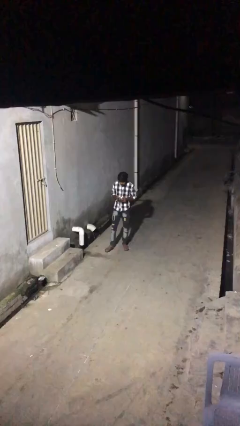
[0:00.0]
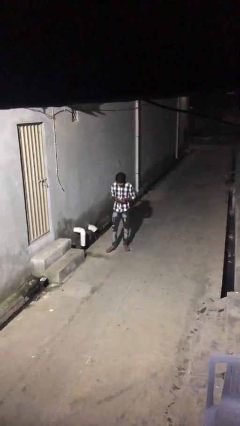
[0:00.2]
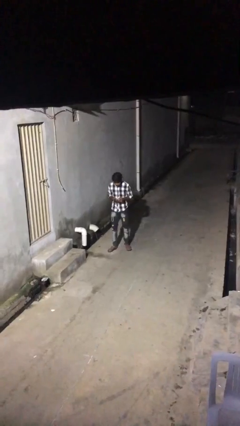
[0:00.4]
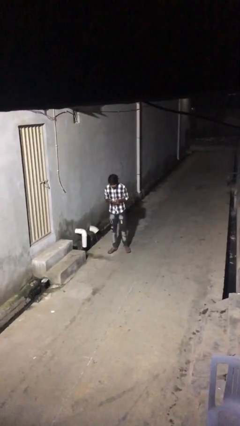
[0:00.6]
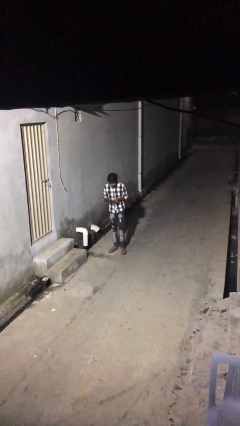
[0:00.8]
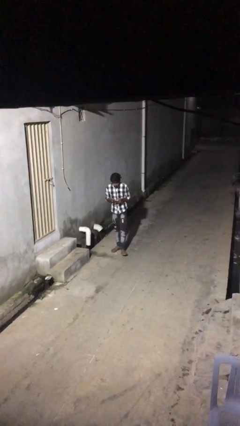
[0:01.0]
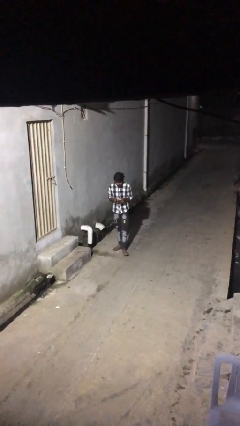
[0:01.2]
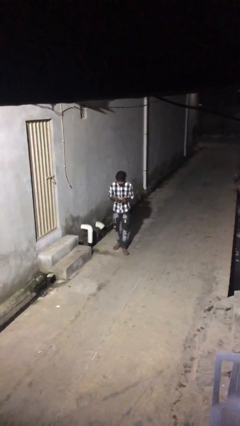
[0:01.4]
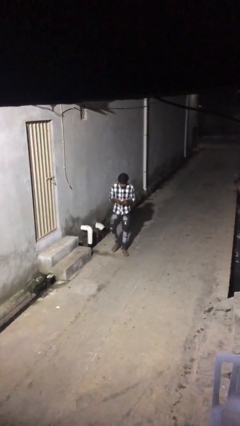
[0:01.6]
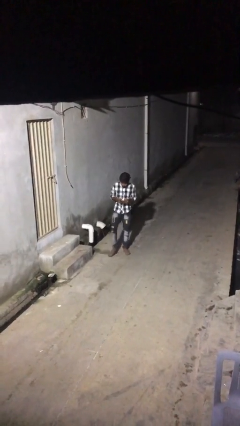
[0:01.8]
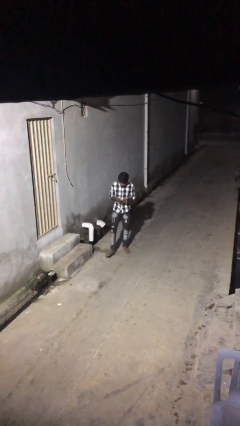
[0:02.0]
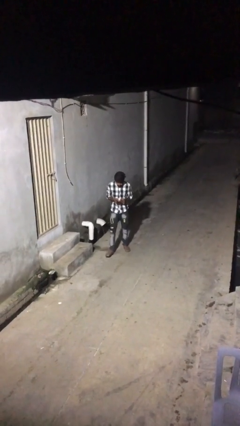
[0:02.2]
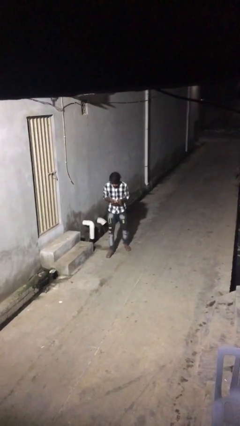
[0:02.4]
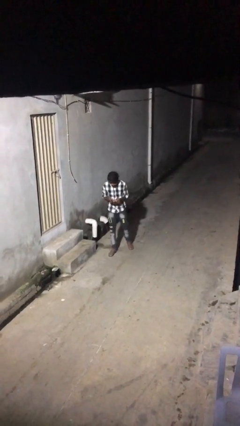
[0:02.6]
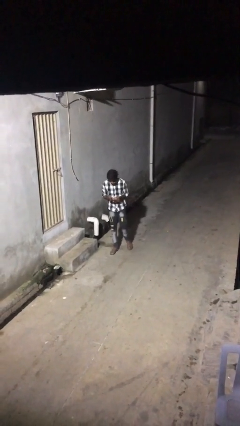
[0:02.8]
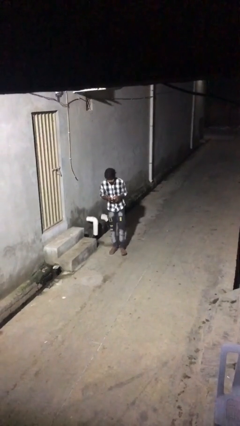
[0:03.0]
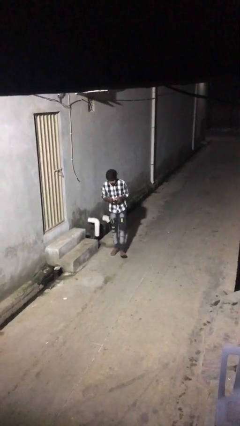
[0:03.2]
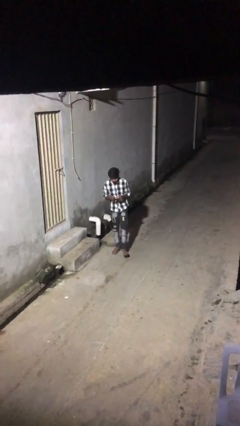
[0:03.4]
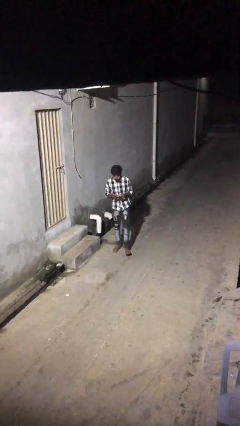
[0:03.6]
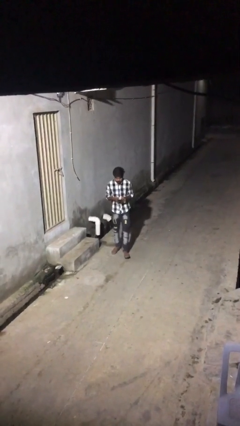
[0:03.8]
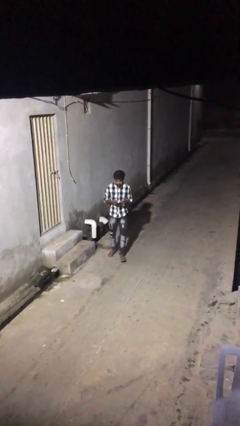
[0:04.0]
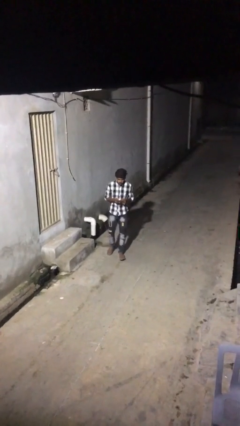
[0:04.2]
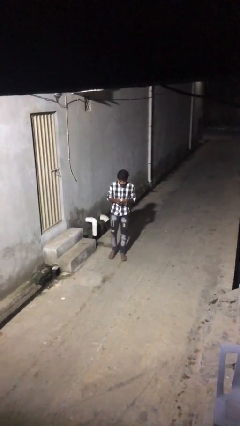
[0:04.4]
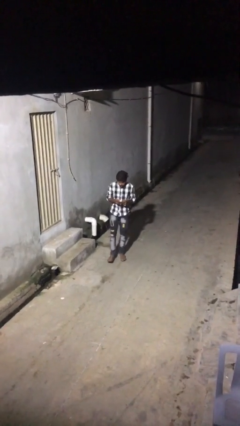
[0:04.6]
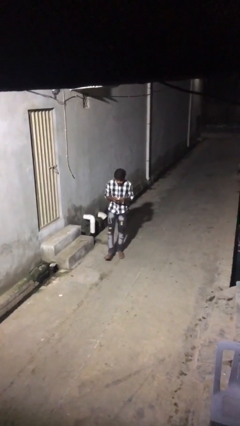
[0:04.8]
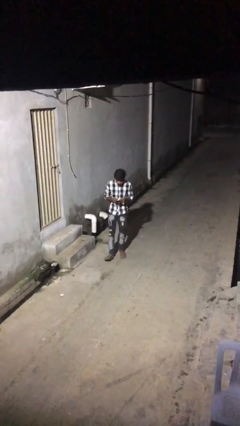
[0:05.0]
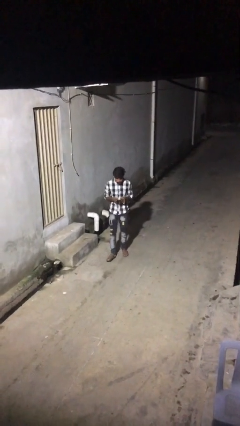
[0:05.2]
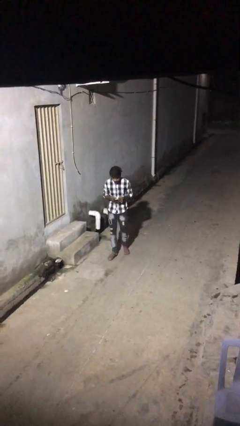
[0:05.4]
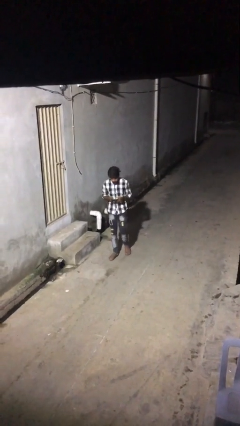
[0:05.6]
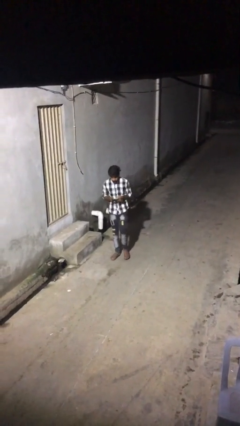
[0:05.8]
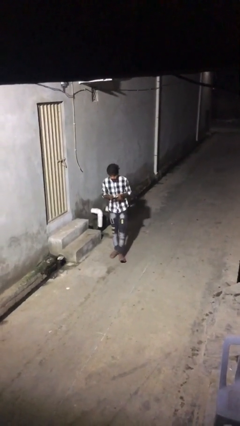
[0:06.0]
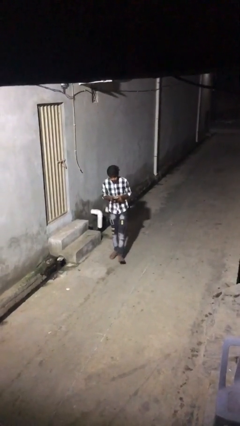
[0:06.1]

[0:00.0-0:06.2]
person texts on phone

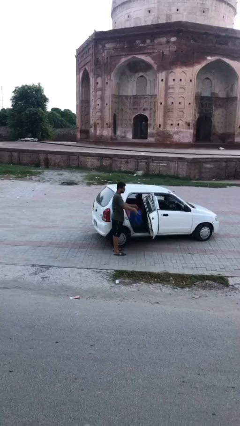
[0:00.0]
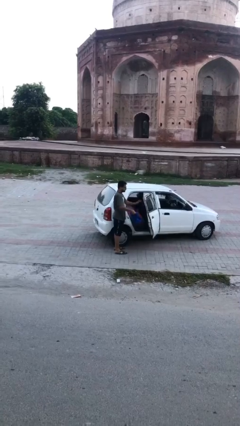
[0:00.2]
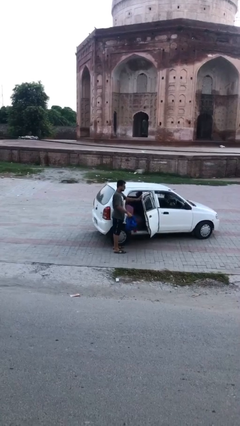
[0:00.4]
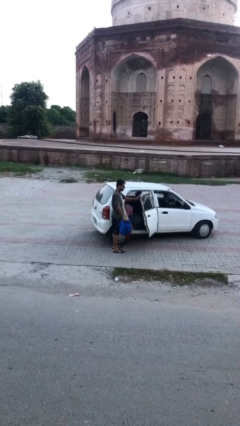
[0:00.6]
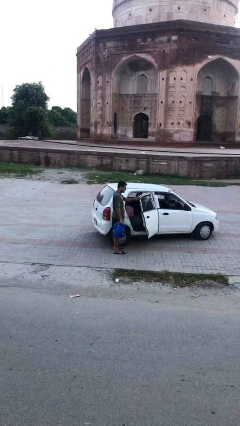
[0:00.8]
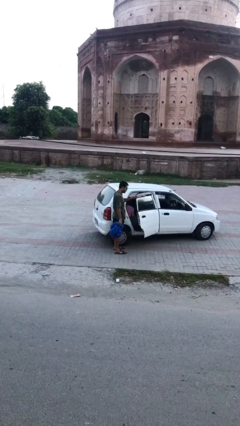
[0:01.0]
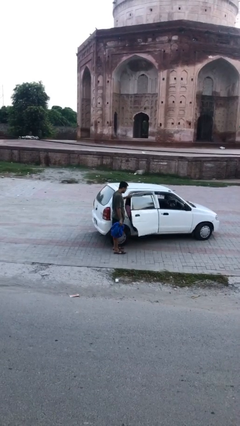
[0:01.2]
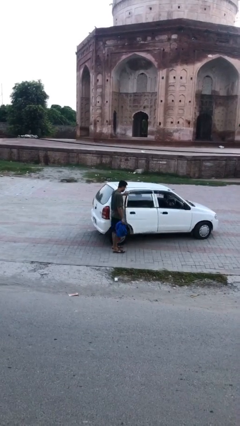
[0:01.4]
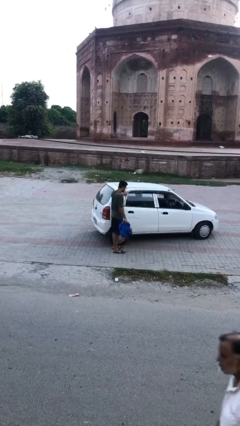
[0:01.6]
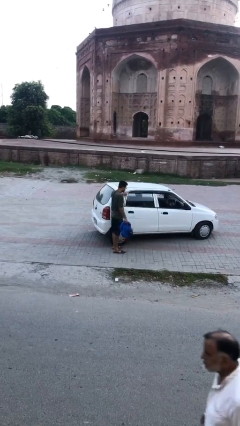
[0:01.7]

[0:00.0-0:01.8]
person closes car door

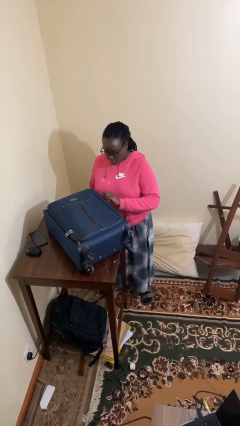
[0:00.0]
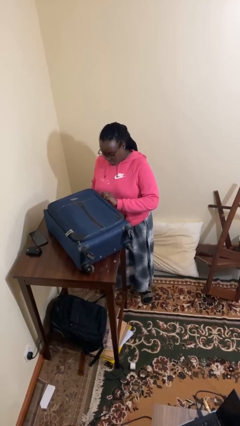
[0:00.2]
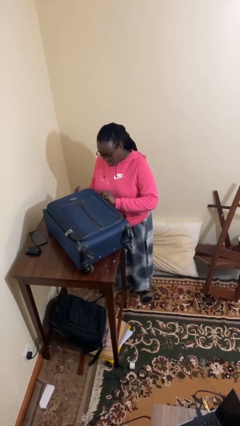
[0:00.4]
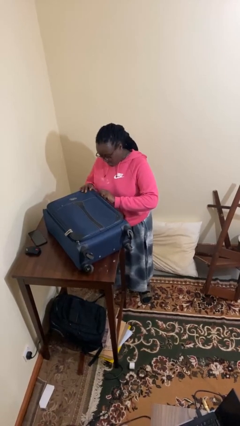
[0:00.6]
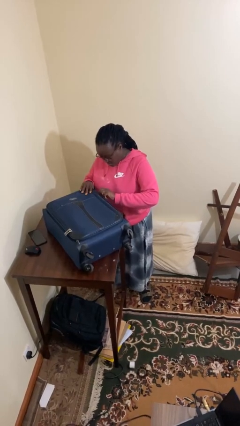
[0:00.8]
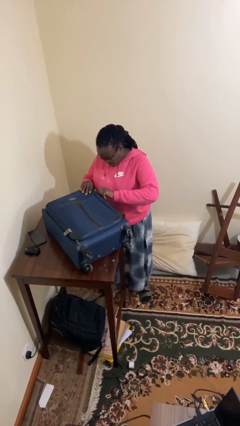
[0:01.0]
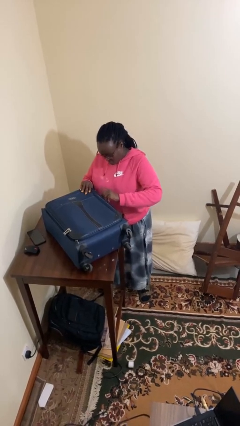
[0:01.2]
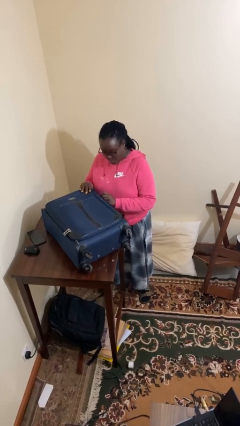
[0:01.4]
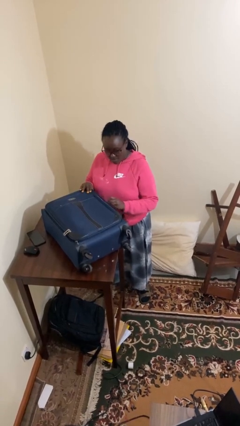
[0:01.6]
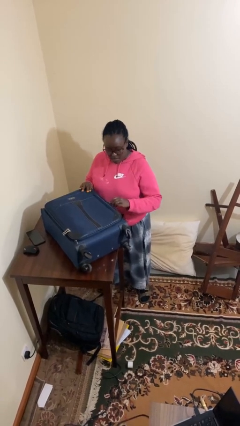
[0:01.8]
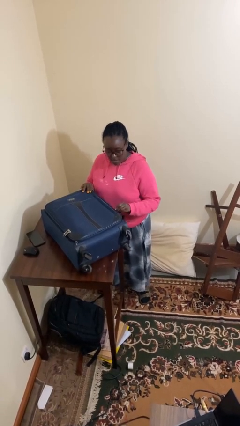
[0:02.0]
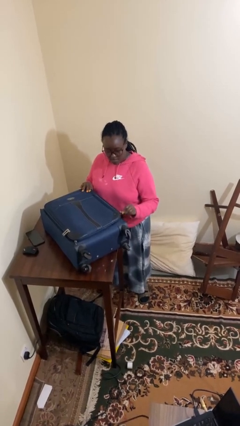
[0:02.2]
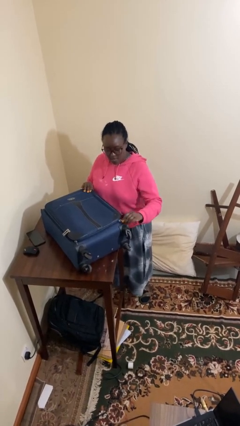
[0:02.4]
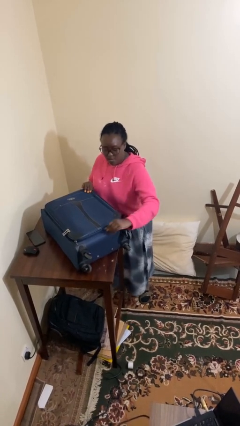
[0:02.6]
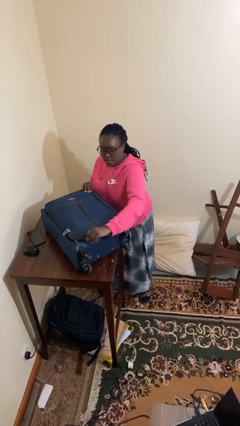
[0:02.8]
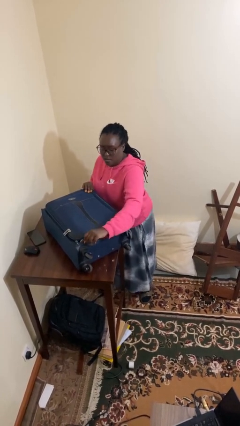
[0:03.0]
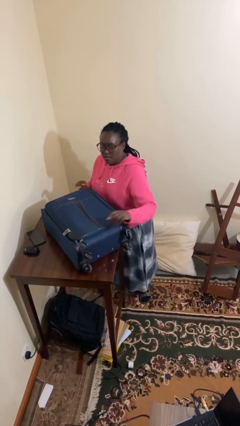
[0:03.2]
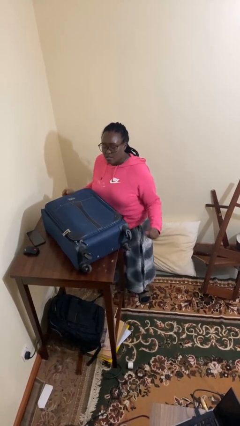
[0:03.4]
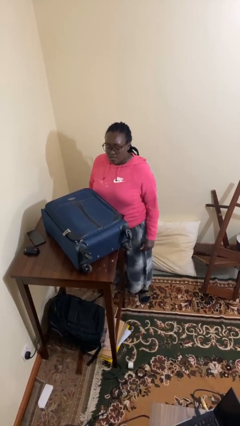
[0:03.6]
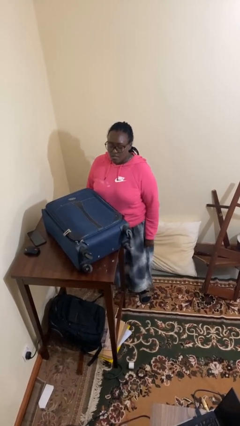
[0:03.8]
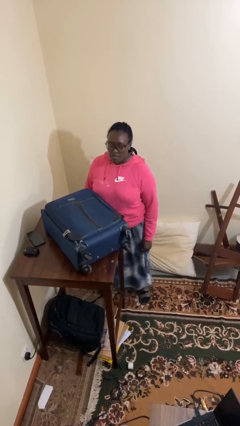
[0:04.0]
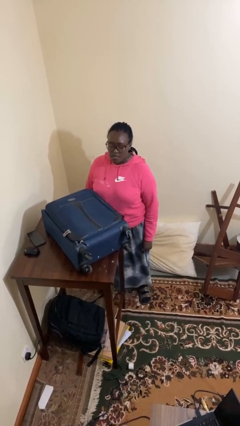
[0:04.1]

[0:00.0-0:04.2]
person closes suitcase

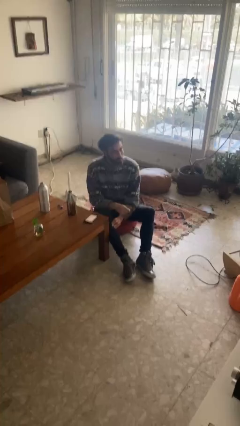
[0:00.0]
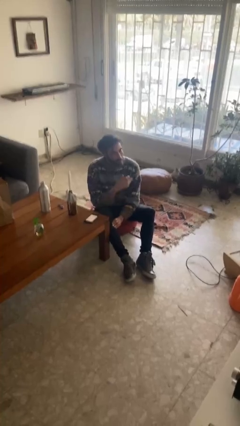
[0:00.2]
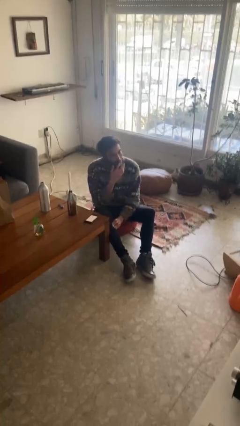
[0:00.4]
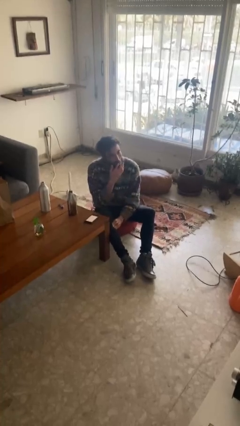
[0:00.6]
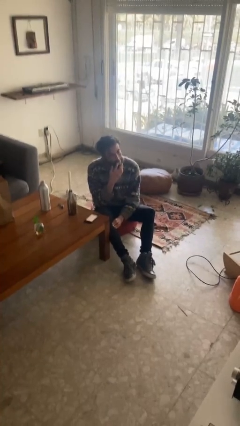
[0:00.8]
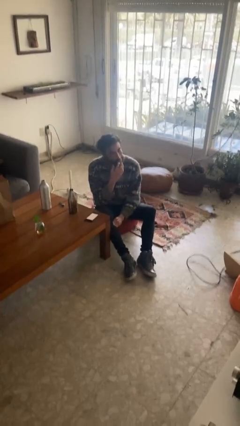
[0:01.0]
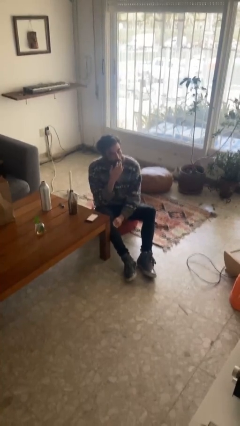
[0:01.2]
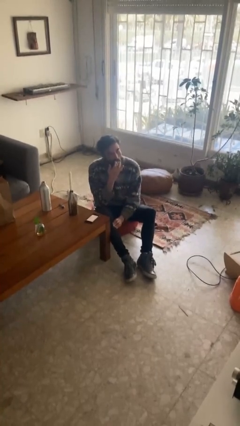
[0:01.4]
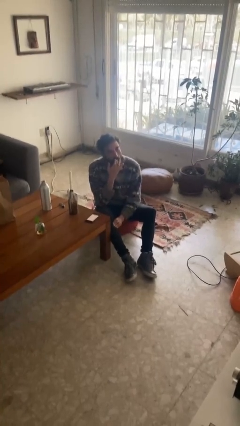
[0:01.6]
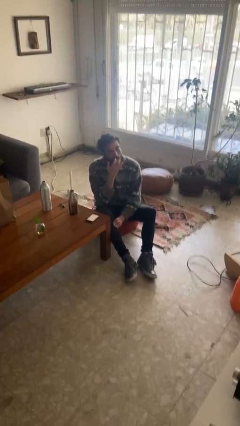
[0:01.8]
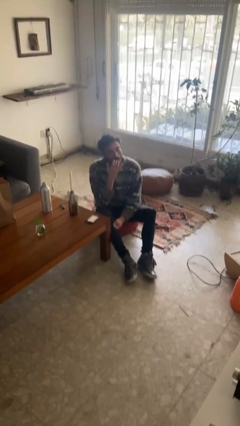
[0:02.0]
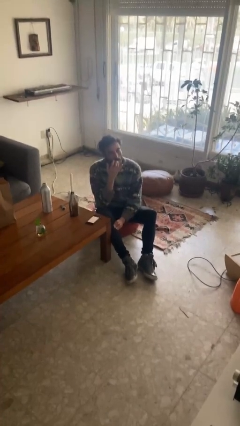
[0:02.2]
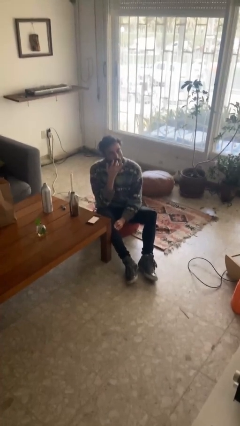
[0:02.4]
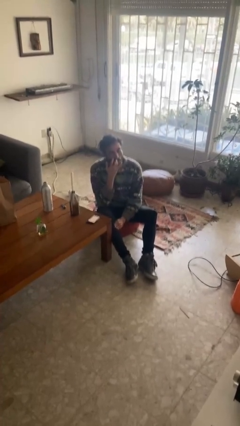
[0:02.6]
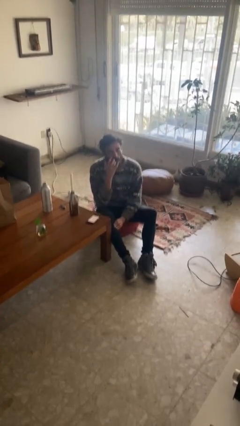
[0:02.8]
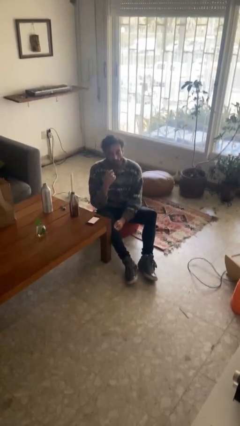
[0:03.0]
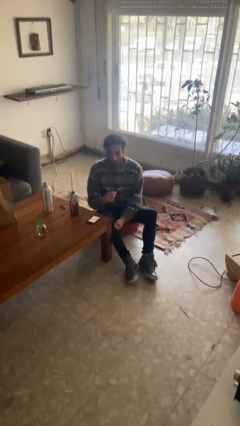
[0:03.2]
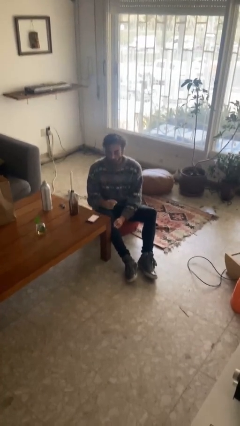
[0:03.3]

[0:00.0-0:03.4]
person licks fingers

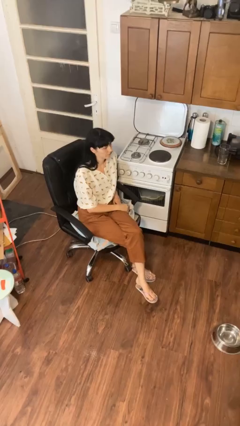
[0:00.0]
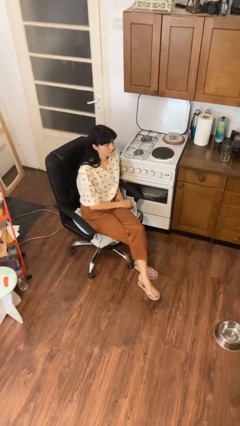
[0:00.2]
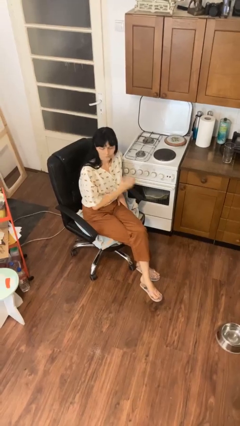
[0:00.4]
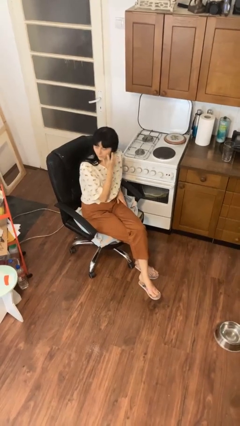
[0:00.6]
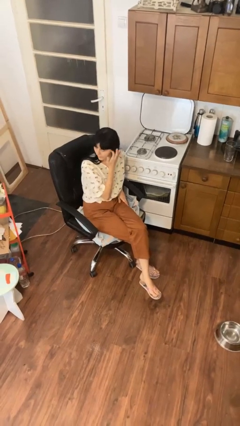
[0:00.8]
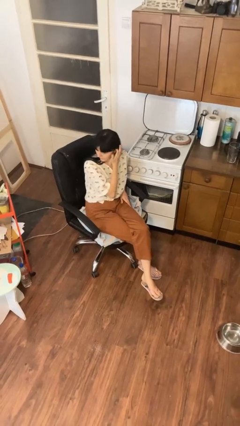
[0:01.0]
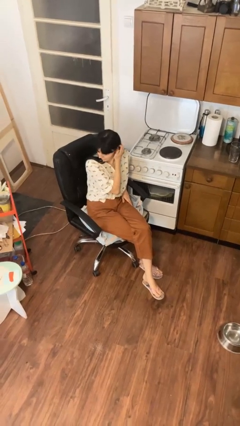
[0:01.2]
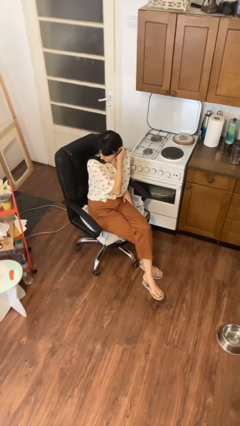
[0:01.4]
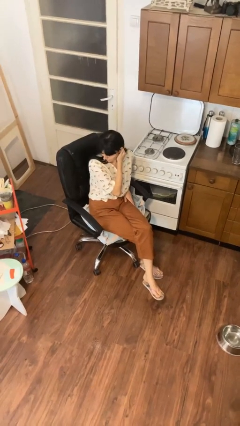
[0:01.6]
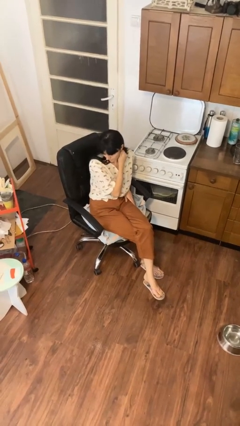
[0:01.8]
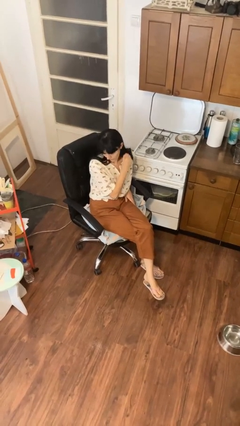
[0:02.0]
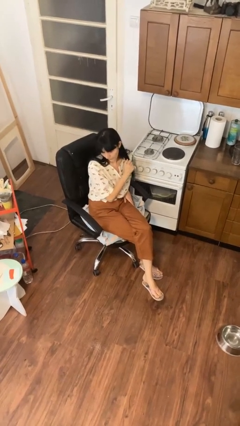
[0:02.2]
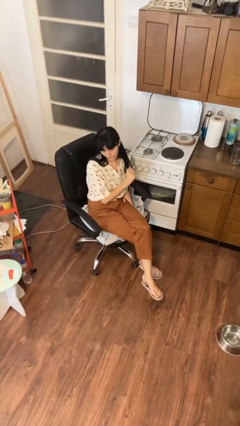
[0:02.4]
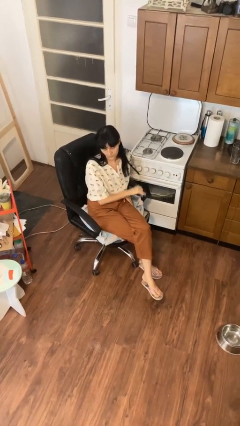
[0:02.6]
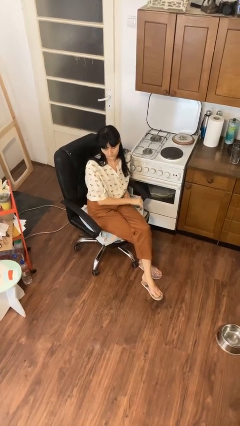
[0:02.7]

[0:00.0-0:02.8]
person strokes hair
